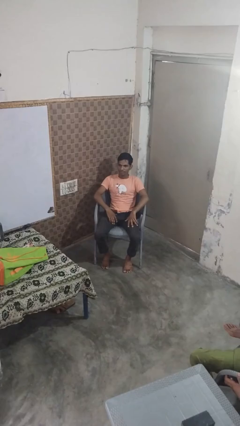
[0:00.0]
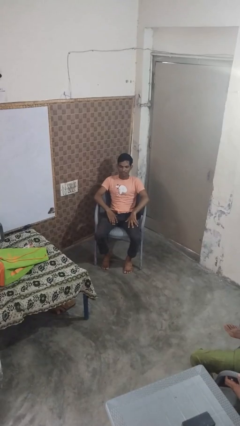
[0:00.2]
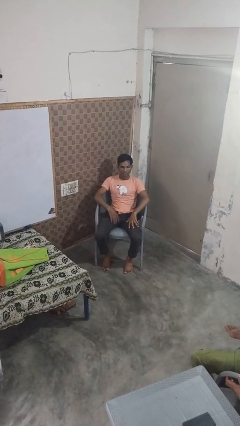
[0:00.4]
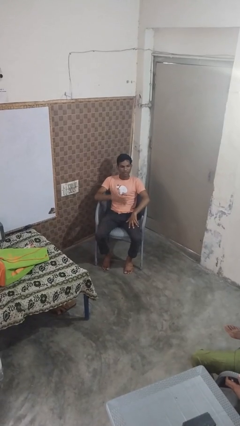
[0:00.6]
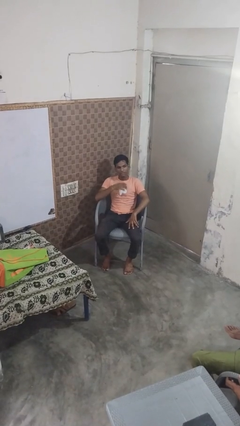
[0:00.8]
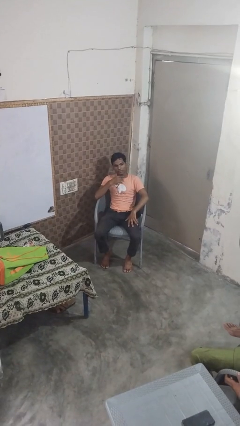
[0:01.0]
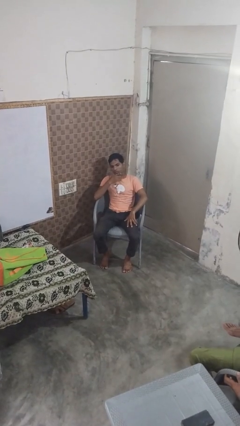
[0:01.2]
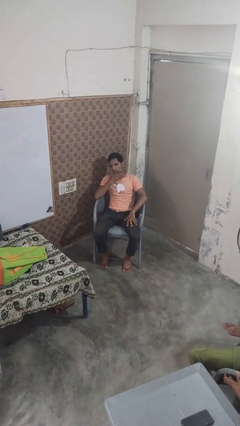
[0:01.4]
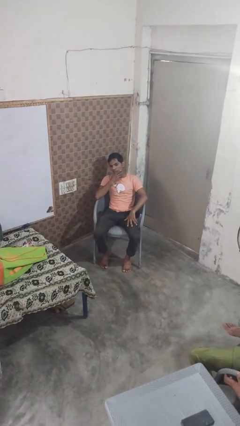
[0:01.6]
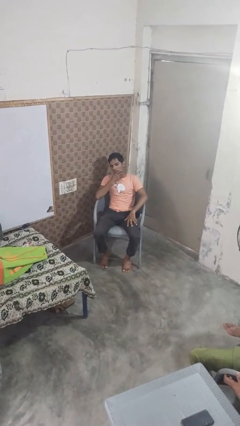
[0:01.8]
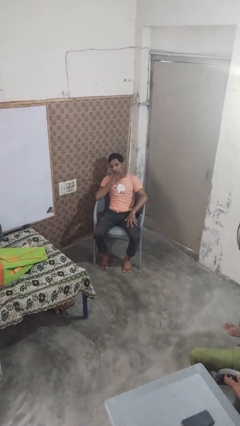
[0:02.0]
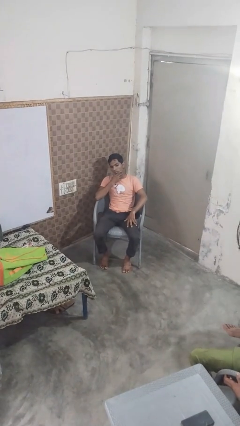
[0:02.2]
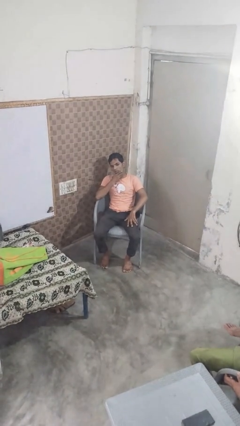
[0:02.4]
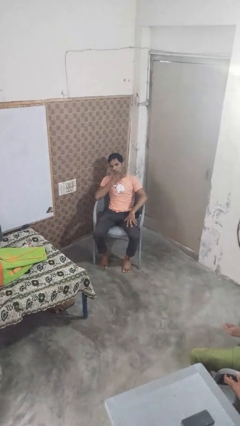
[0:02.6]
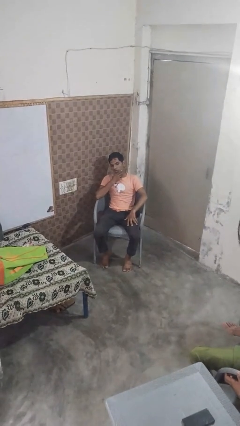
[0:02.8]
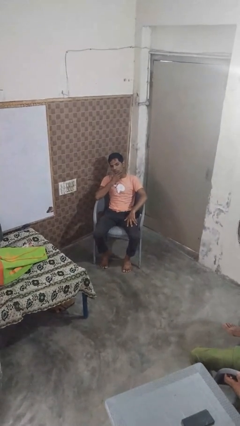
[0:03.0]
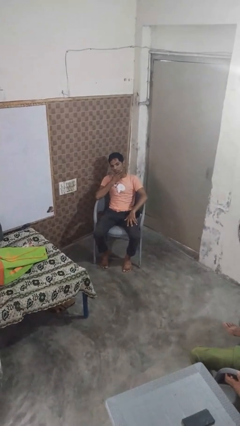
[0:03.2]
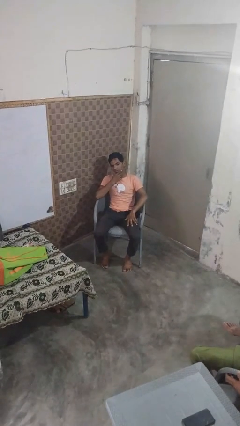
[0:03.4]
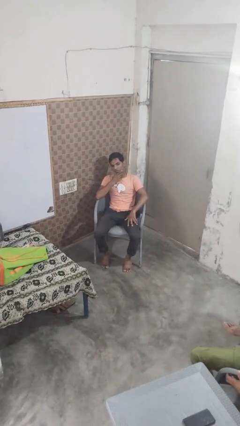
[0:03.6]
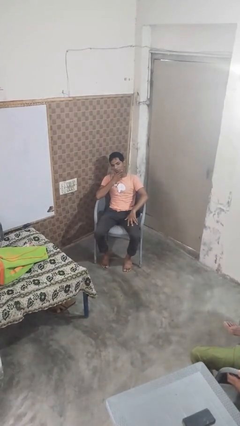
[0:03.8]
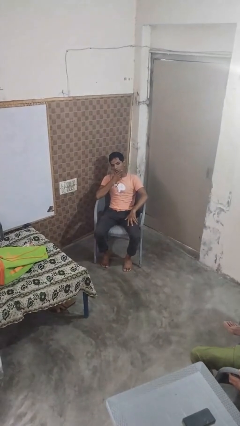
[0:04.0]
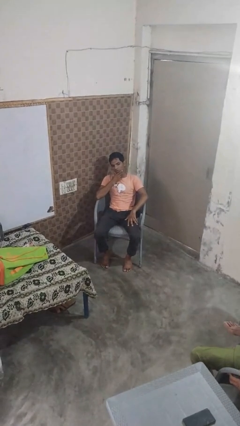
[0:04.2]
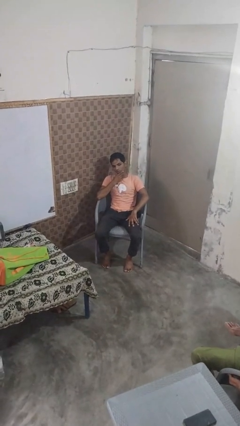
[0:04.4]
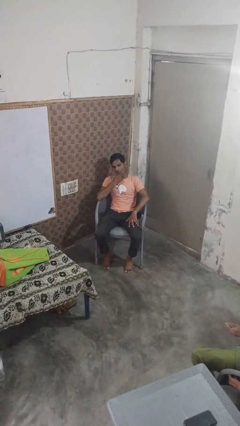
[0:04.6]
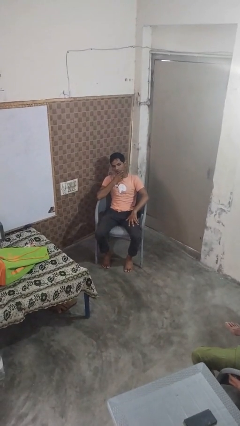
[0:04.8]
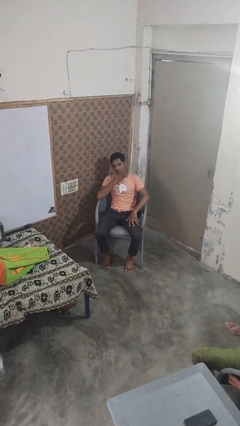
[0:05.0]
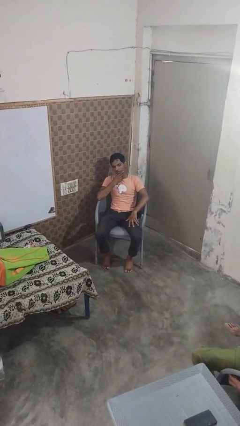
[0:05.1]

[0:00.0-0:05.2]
person strokes chin

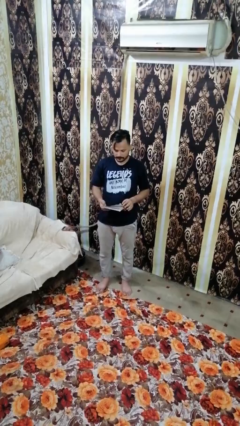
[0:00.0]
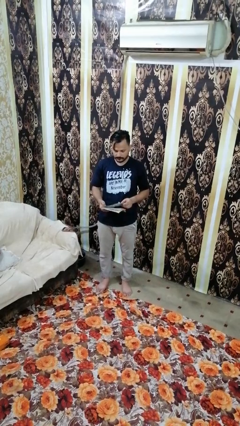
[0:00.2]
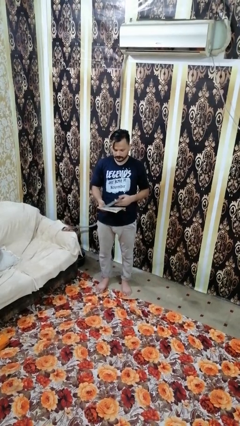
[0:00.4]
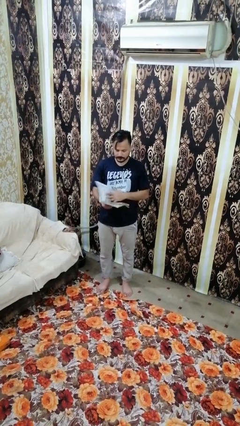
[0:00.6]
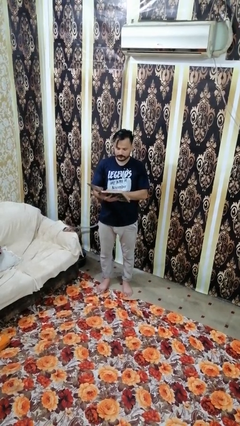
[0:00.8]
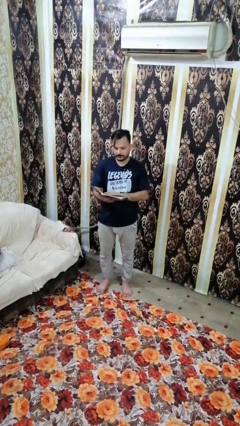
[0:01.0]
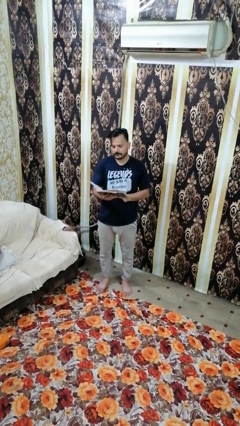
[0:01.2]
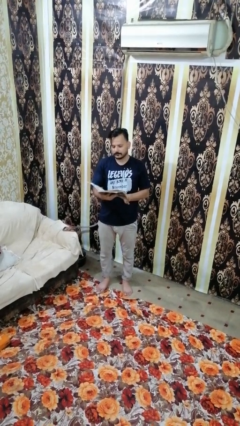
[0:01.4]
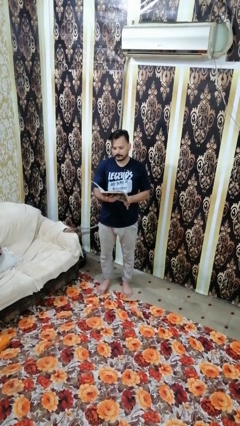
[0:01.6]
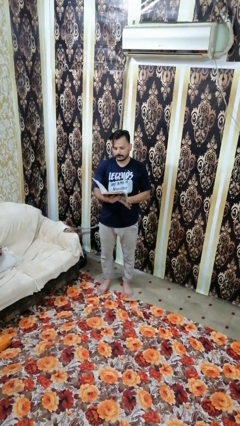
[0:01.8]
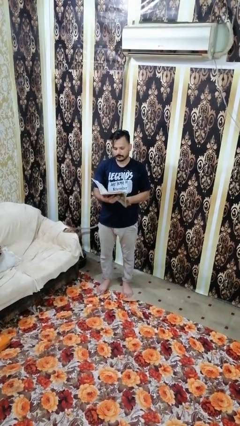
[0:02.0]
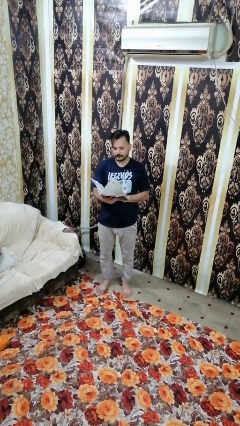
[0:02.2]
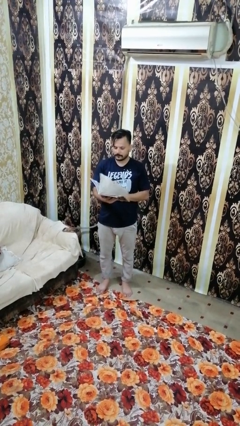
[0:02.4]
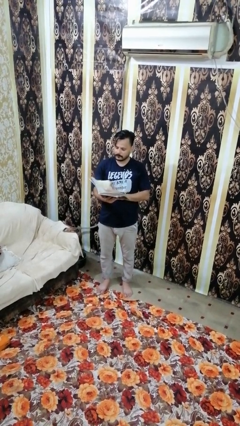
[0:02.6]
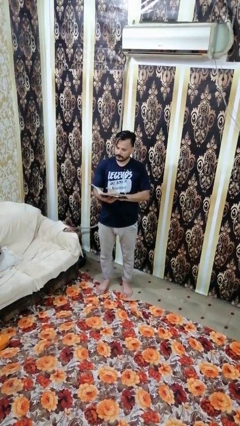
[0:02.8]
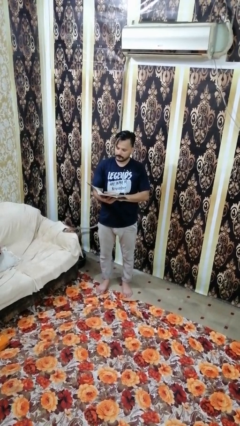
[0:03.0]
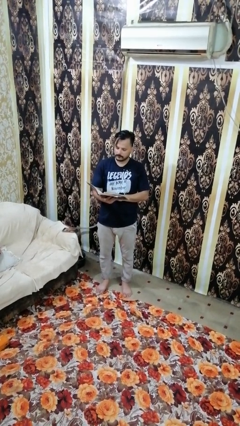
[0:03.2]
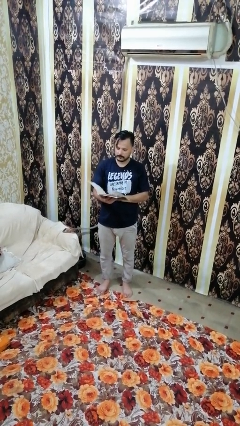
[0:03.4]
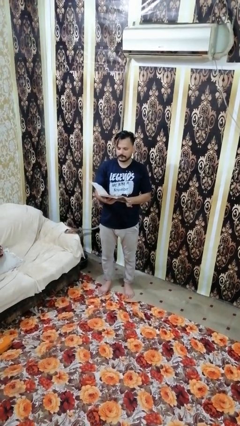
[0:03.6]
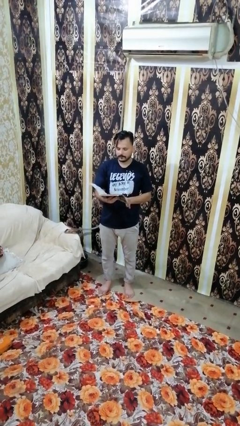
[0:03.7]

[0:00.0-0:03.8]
person reads book

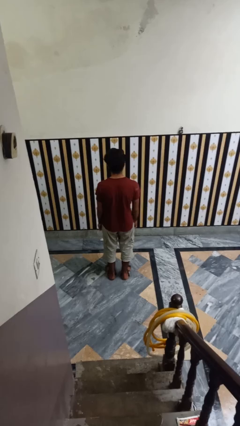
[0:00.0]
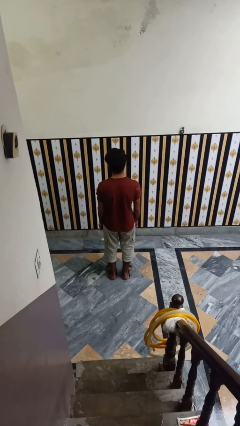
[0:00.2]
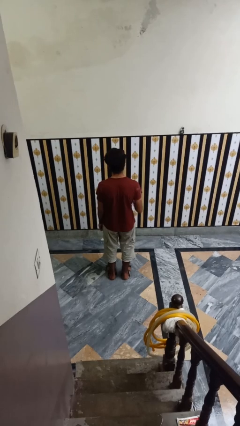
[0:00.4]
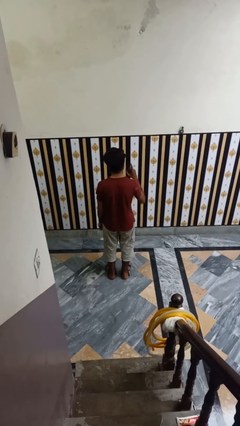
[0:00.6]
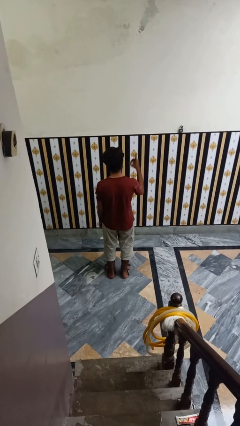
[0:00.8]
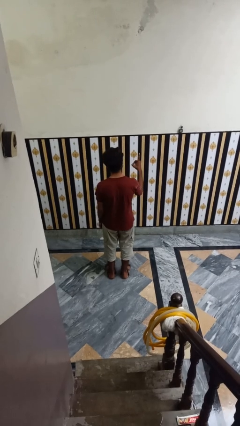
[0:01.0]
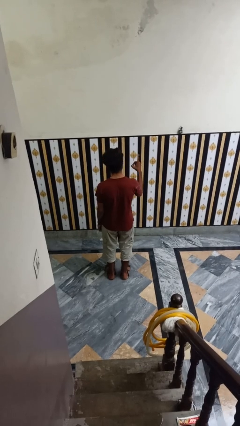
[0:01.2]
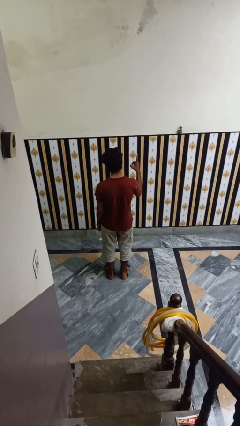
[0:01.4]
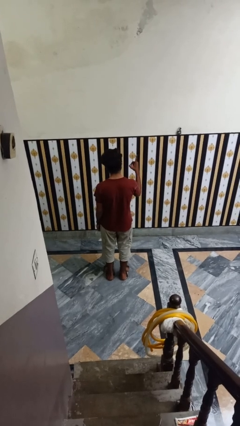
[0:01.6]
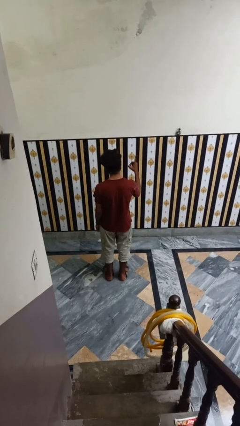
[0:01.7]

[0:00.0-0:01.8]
person gestures number one

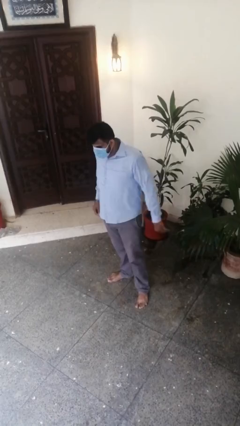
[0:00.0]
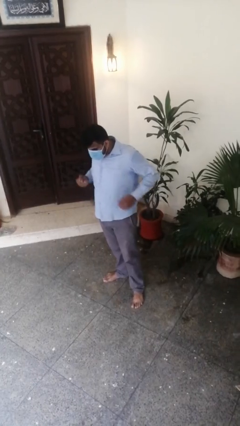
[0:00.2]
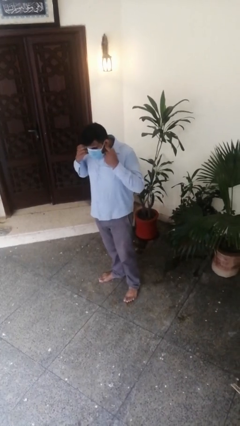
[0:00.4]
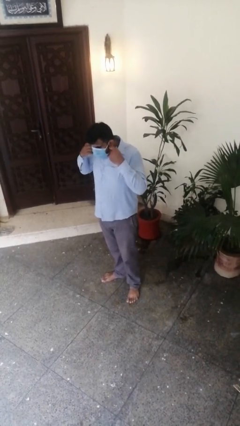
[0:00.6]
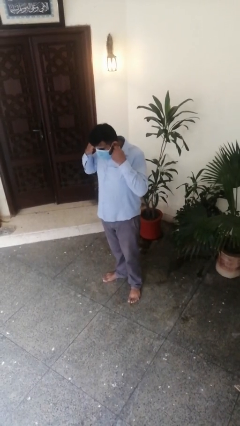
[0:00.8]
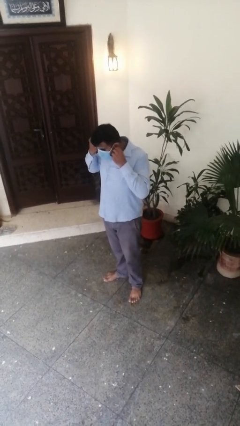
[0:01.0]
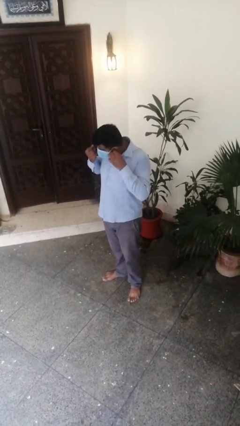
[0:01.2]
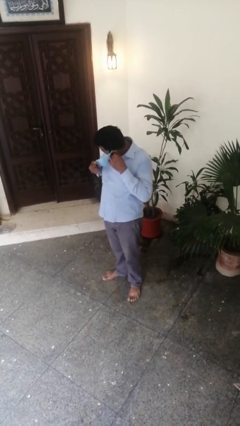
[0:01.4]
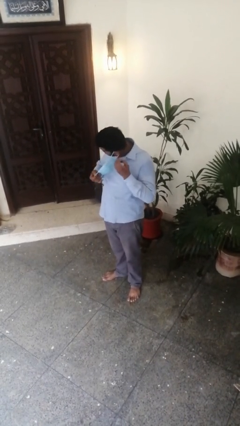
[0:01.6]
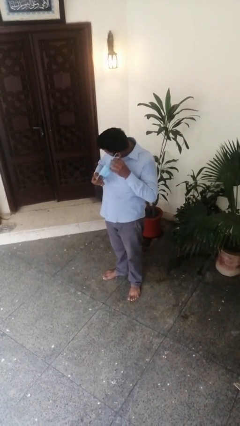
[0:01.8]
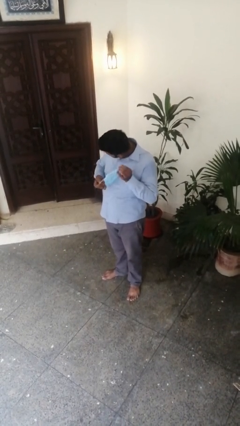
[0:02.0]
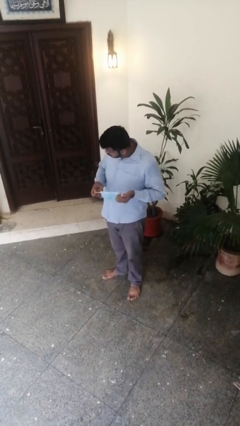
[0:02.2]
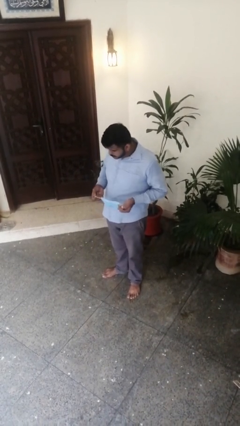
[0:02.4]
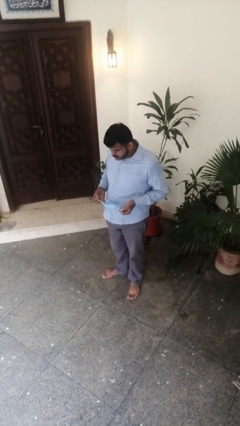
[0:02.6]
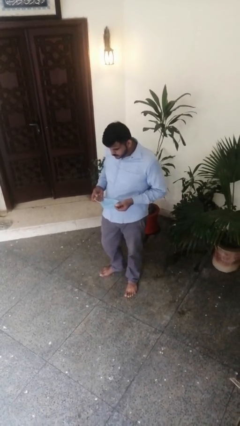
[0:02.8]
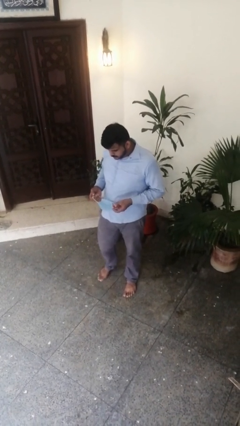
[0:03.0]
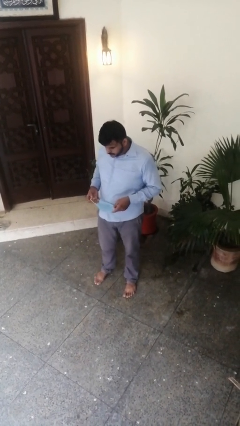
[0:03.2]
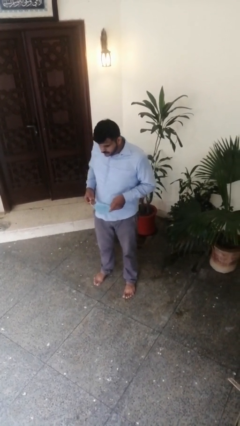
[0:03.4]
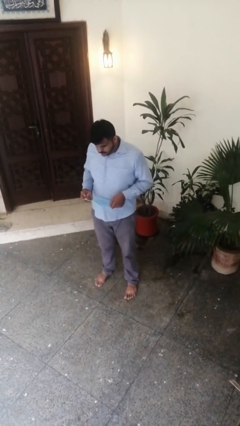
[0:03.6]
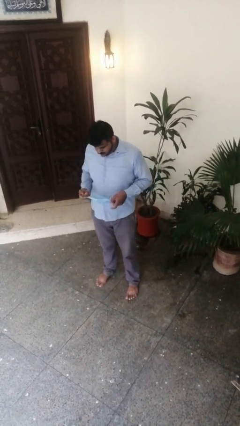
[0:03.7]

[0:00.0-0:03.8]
person takes off facemask

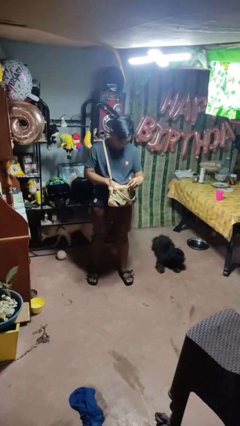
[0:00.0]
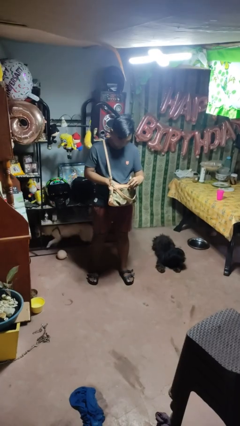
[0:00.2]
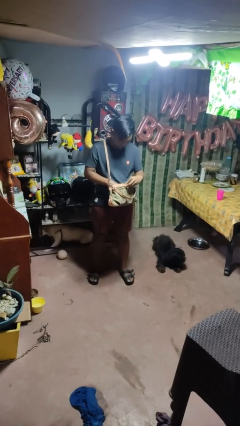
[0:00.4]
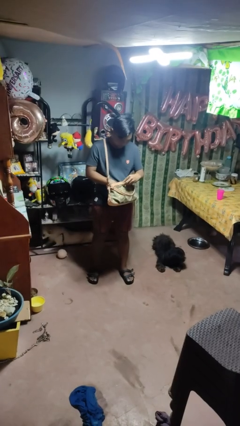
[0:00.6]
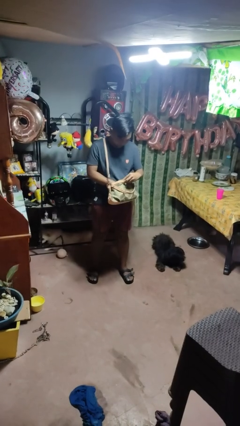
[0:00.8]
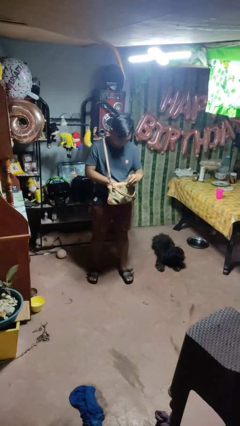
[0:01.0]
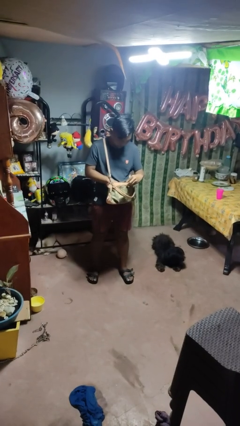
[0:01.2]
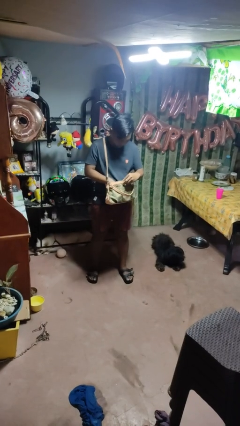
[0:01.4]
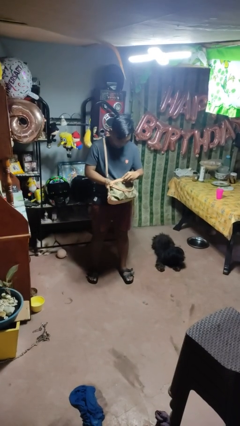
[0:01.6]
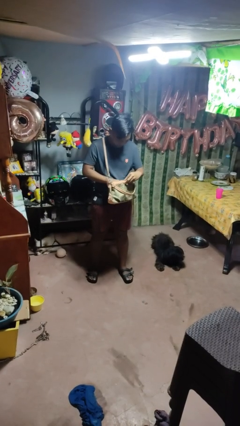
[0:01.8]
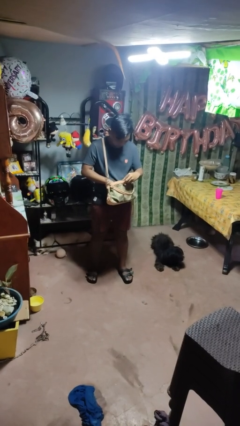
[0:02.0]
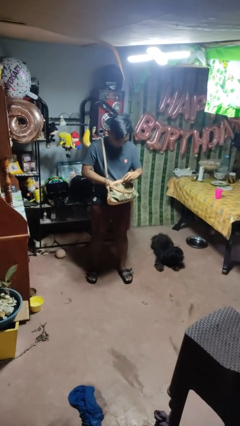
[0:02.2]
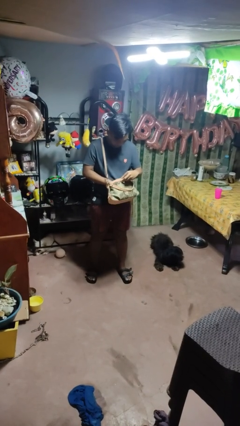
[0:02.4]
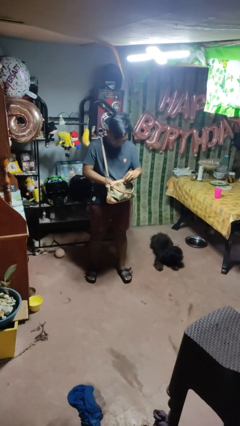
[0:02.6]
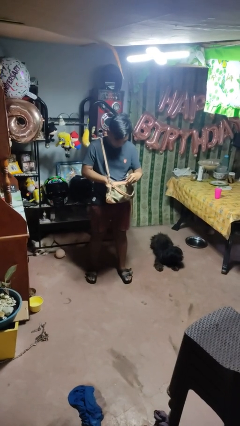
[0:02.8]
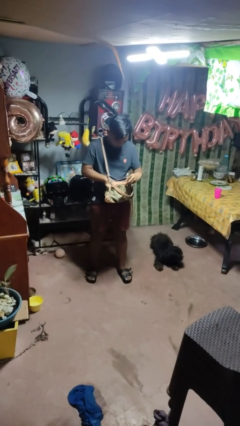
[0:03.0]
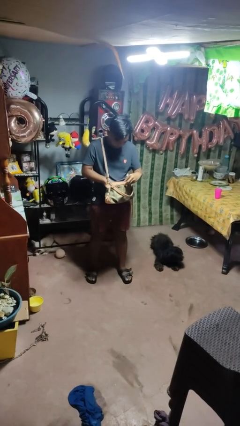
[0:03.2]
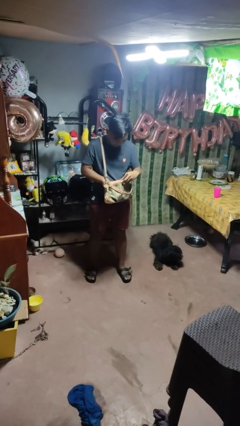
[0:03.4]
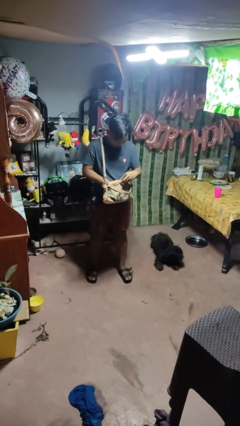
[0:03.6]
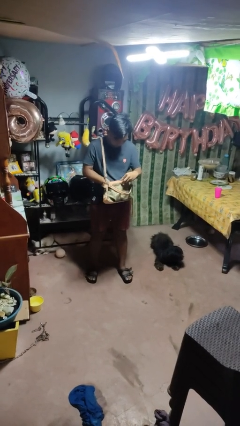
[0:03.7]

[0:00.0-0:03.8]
person searches in purse
